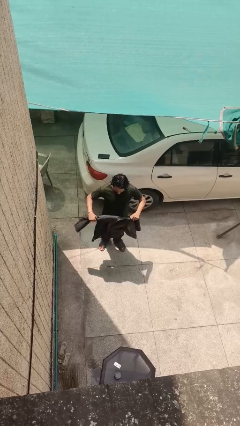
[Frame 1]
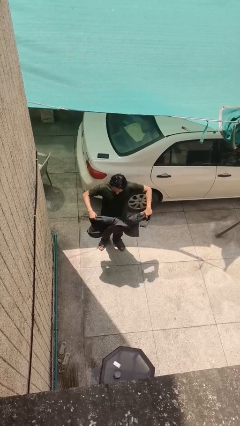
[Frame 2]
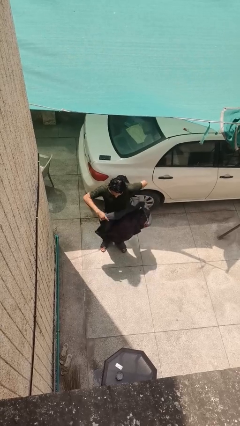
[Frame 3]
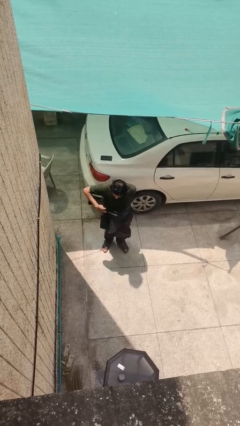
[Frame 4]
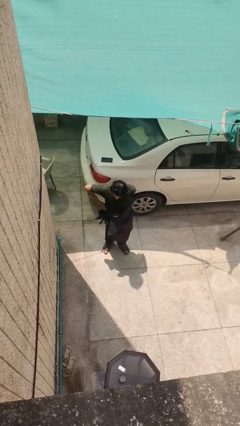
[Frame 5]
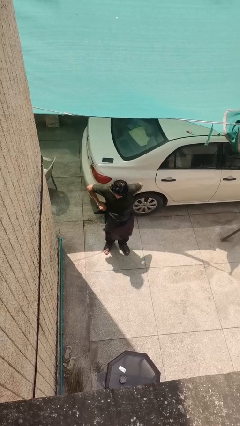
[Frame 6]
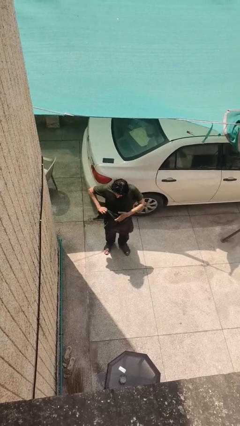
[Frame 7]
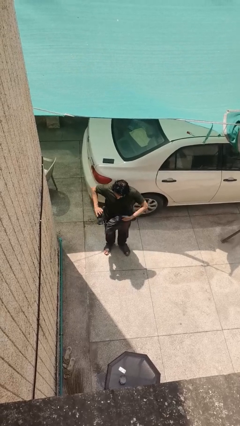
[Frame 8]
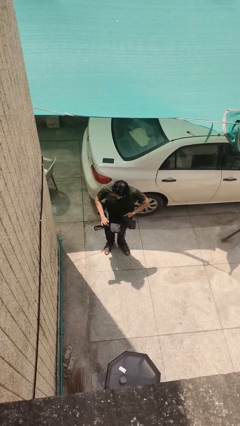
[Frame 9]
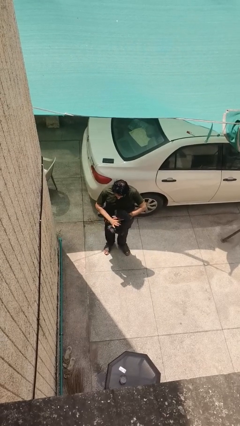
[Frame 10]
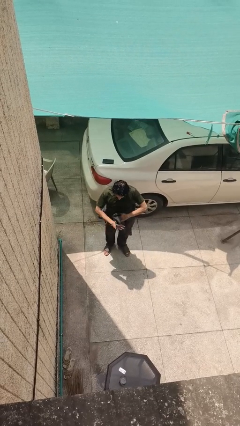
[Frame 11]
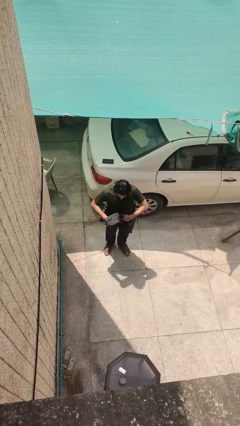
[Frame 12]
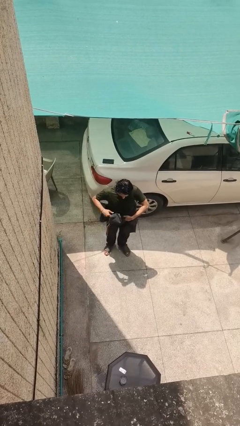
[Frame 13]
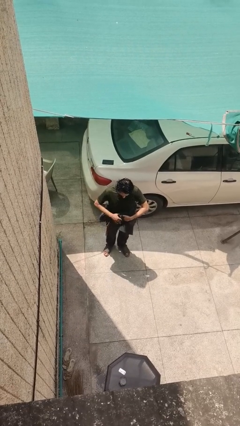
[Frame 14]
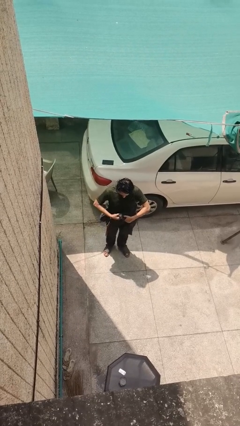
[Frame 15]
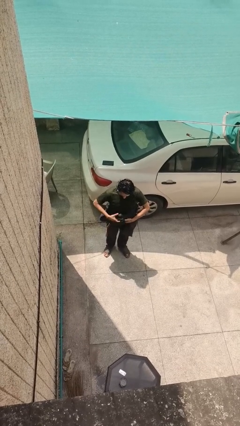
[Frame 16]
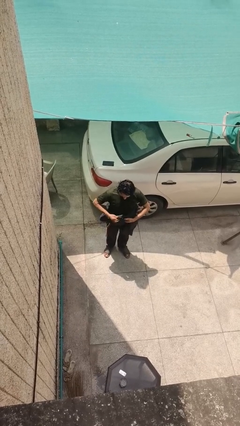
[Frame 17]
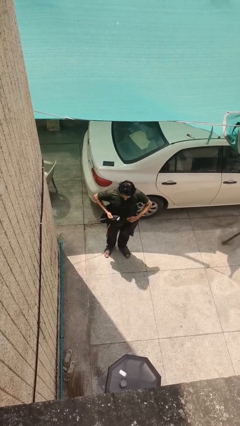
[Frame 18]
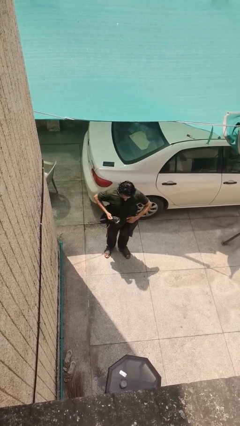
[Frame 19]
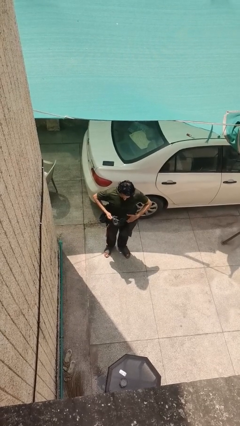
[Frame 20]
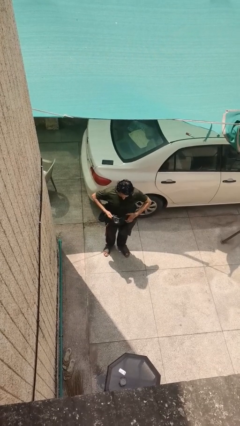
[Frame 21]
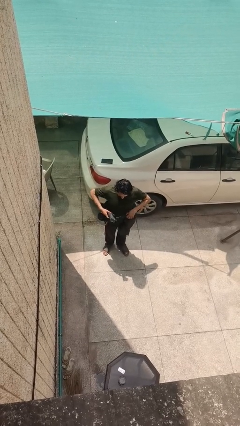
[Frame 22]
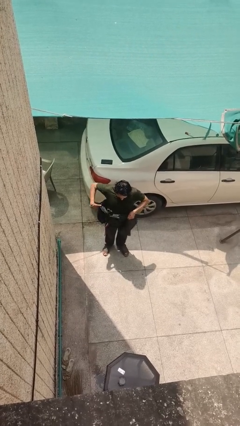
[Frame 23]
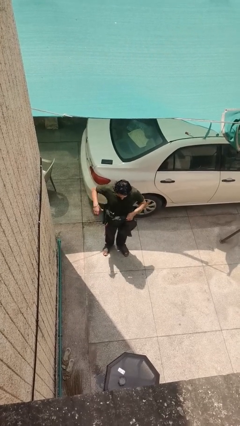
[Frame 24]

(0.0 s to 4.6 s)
person ties jacket around waist

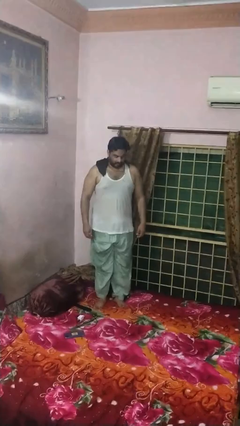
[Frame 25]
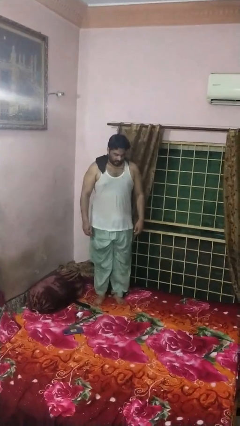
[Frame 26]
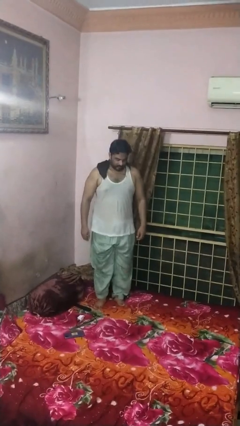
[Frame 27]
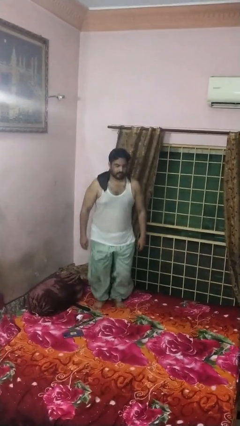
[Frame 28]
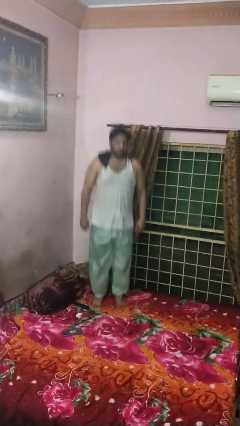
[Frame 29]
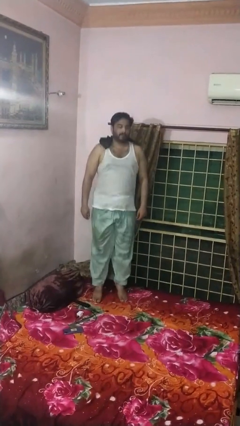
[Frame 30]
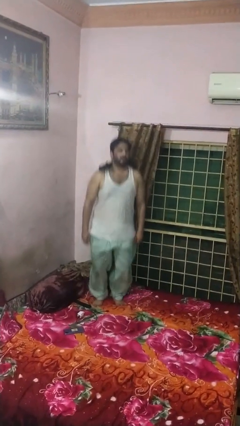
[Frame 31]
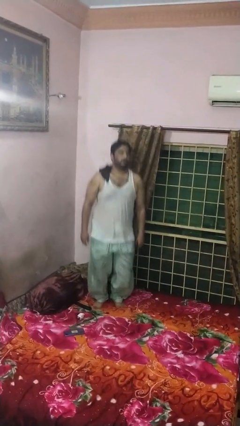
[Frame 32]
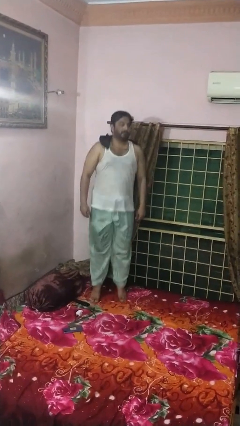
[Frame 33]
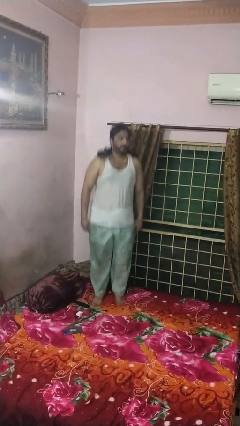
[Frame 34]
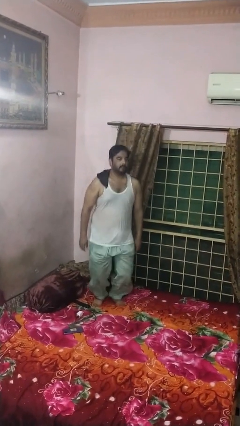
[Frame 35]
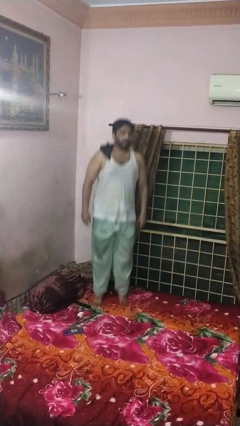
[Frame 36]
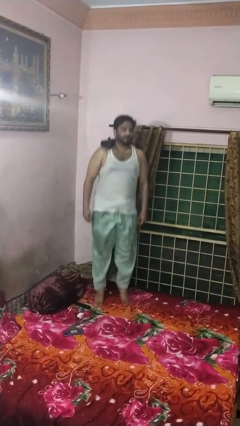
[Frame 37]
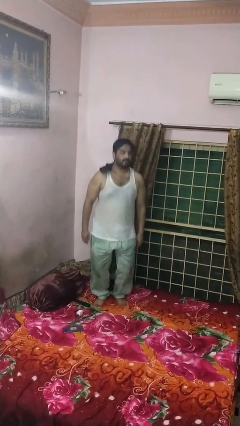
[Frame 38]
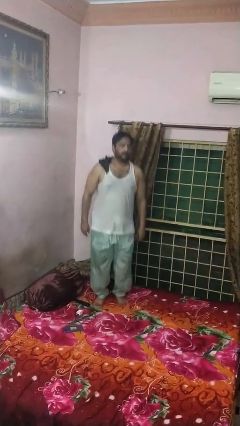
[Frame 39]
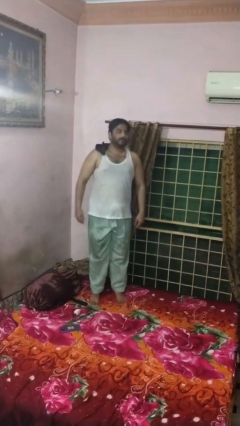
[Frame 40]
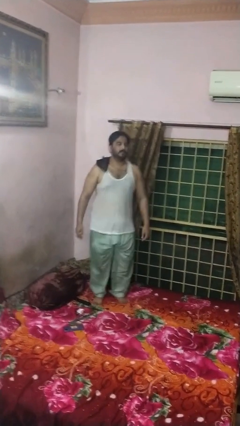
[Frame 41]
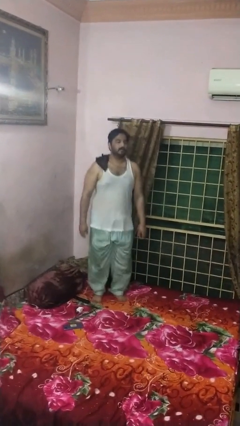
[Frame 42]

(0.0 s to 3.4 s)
person jumps on bed
